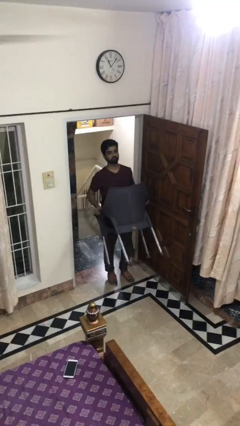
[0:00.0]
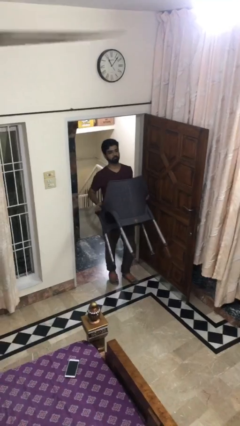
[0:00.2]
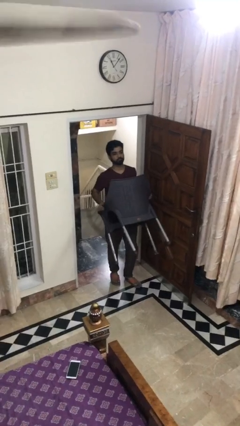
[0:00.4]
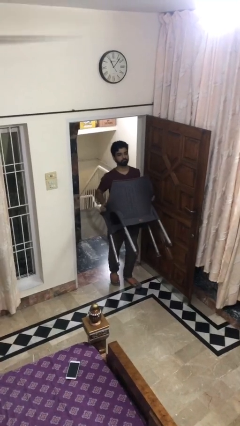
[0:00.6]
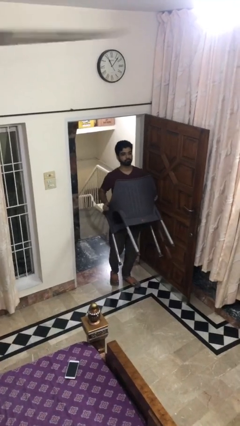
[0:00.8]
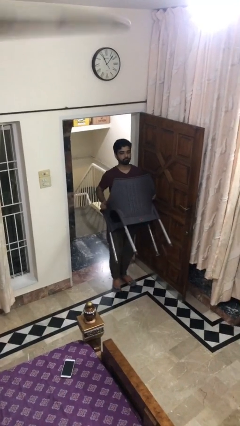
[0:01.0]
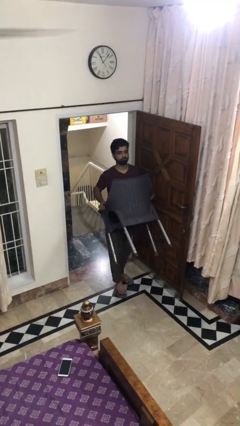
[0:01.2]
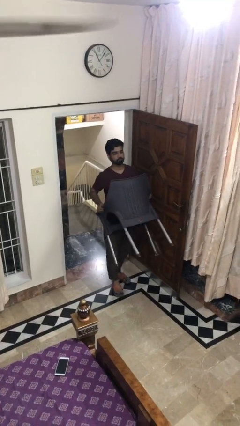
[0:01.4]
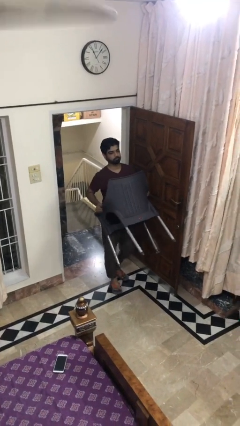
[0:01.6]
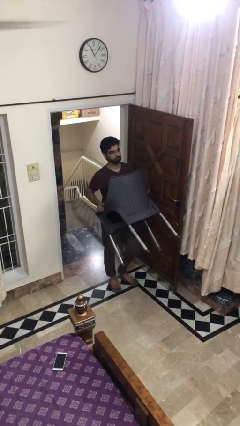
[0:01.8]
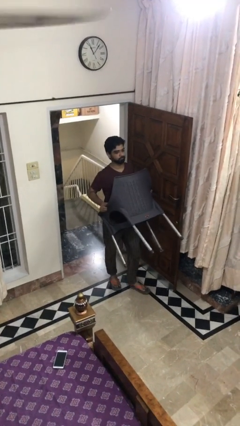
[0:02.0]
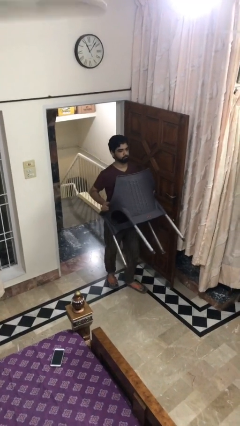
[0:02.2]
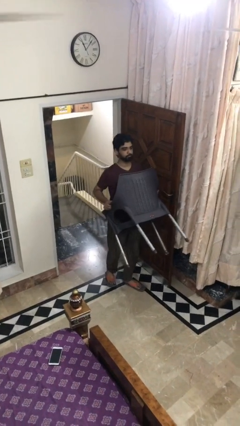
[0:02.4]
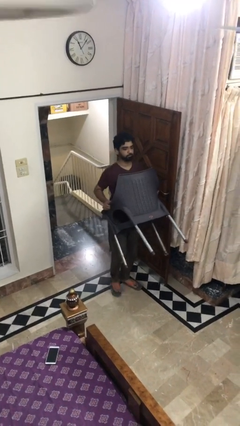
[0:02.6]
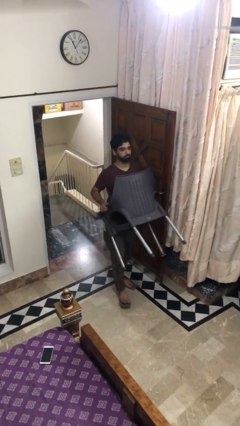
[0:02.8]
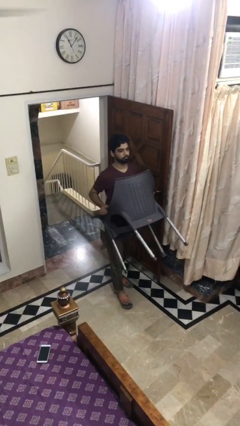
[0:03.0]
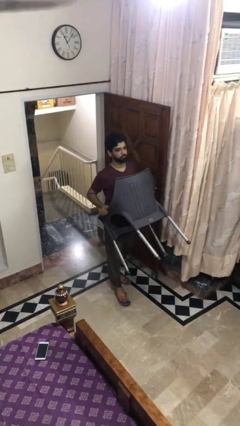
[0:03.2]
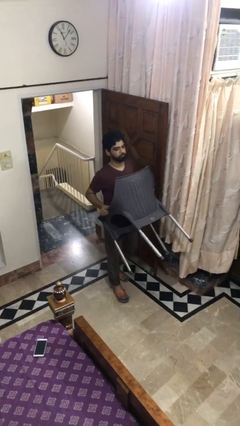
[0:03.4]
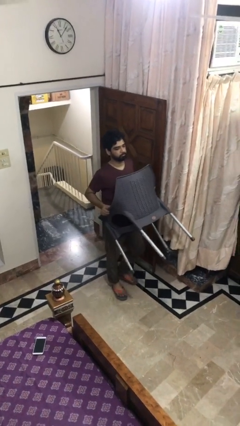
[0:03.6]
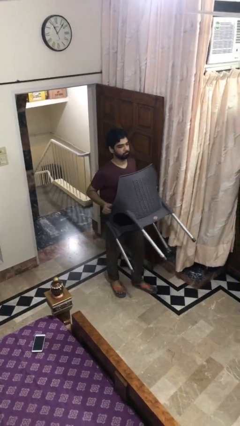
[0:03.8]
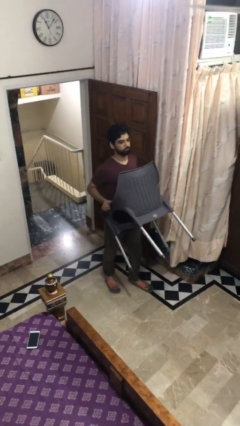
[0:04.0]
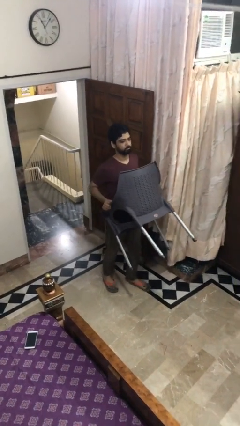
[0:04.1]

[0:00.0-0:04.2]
person carries heavy object

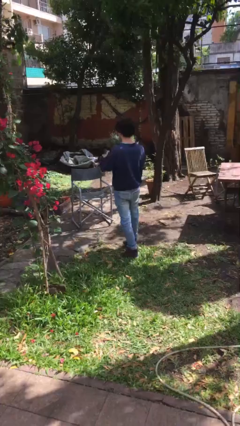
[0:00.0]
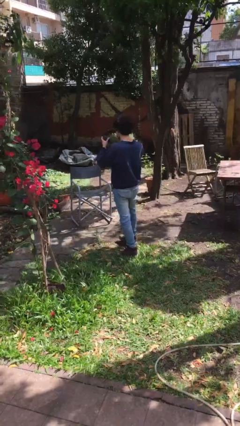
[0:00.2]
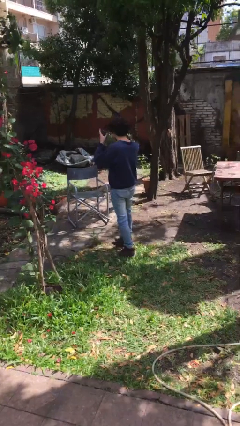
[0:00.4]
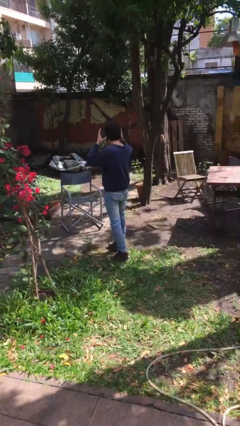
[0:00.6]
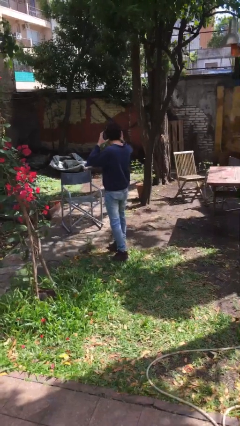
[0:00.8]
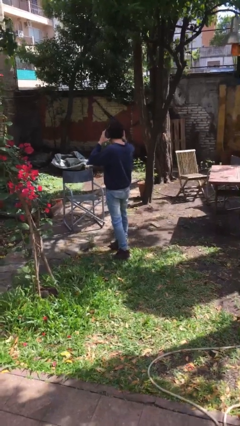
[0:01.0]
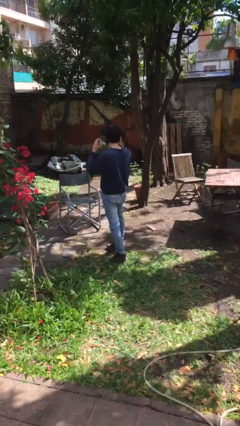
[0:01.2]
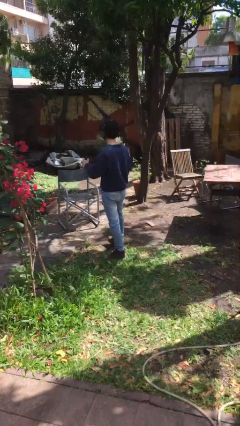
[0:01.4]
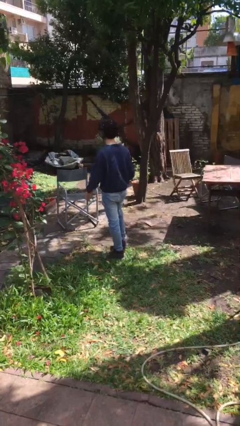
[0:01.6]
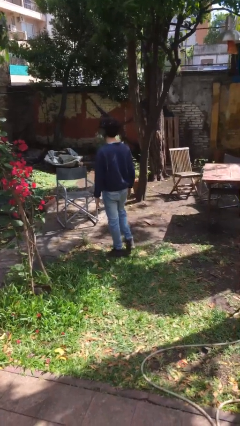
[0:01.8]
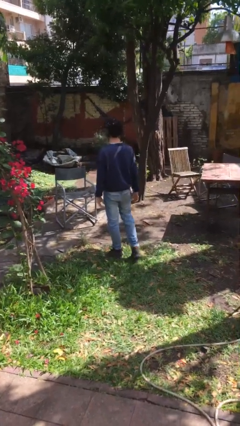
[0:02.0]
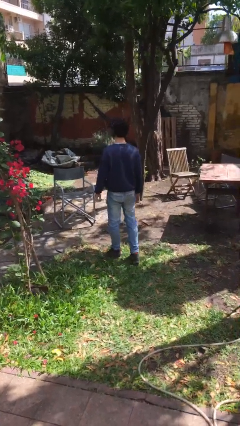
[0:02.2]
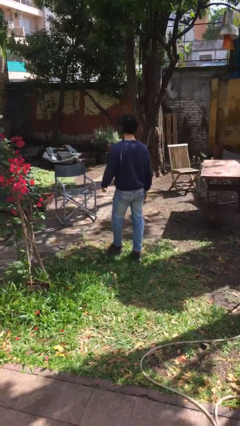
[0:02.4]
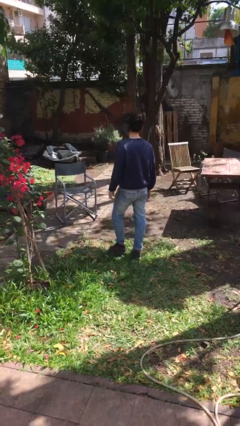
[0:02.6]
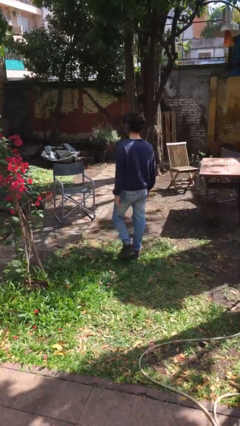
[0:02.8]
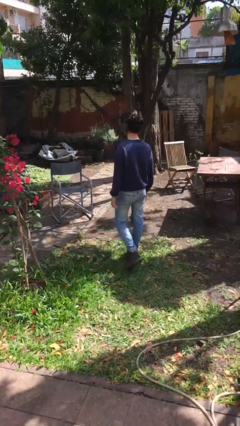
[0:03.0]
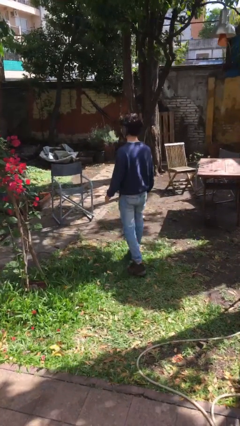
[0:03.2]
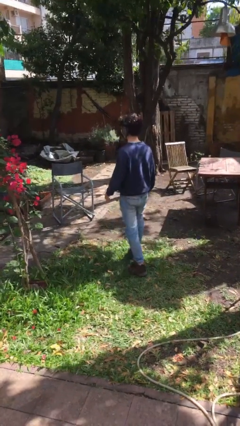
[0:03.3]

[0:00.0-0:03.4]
person puts on headphones

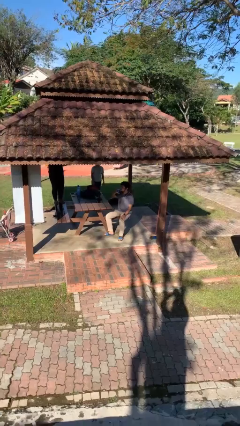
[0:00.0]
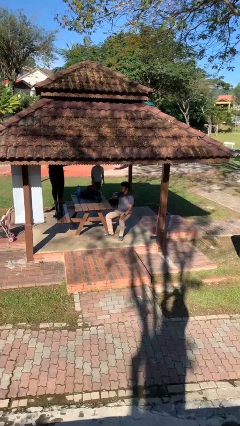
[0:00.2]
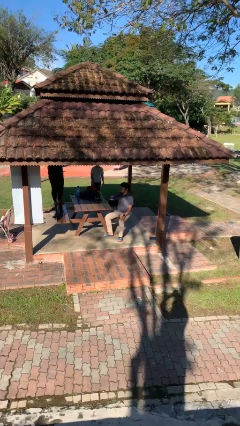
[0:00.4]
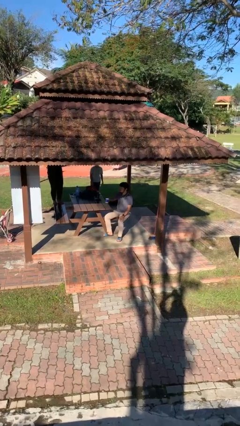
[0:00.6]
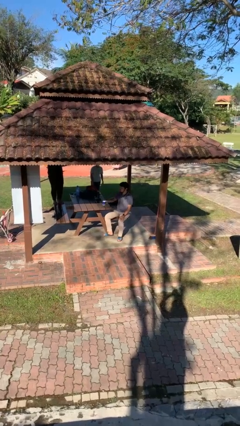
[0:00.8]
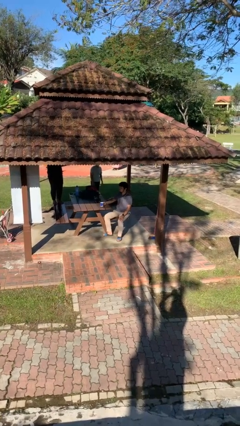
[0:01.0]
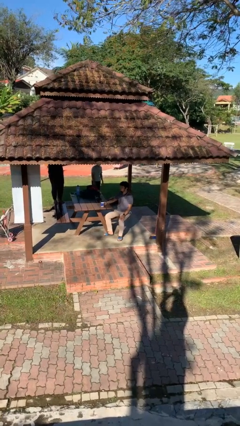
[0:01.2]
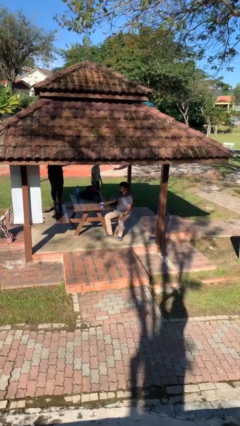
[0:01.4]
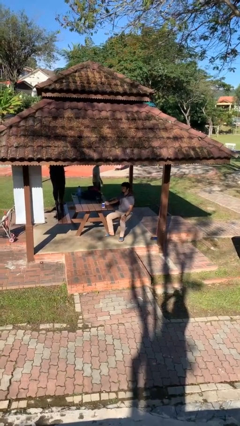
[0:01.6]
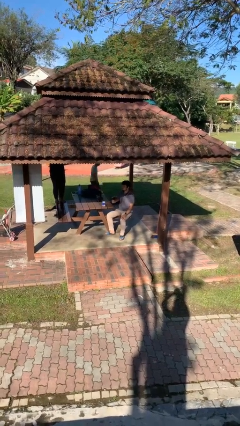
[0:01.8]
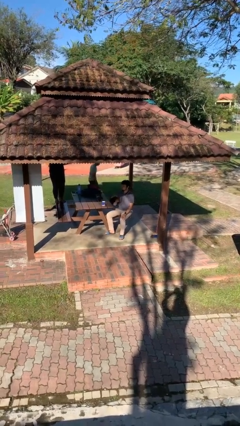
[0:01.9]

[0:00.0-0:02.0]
person puts down object on table

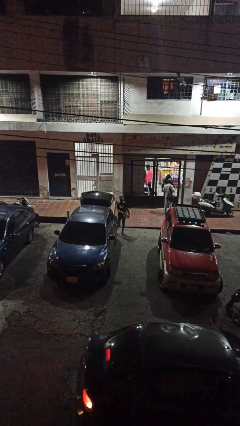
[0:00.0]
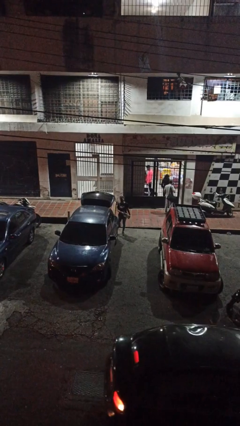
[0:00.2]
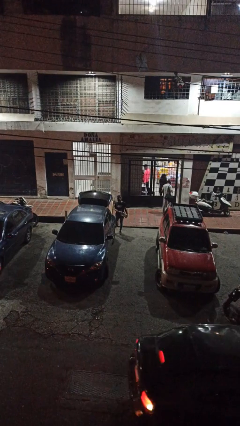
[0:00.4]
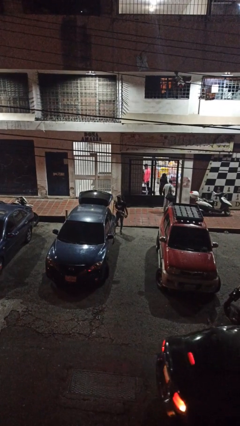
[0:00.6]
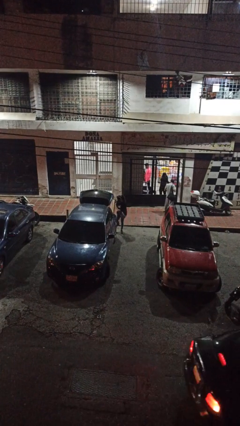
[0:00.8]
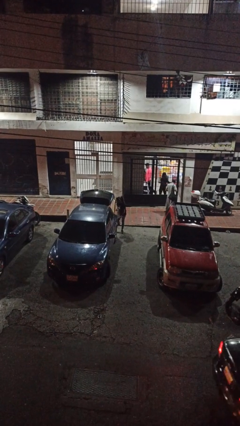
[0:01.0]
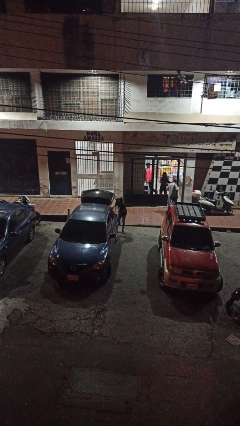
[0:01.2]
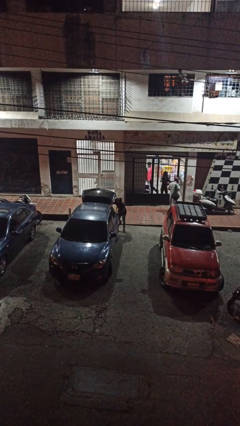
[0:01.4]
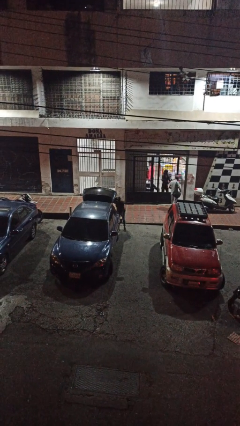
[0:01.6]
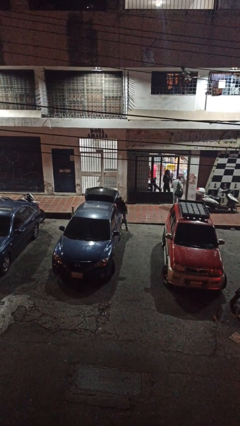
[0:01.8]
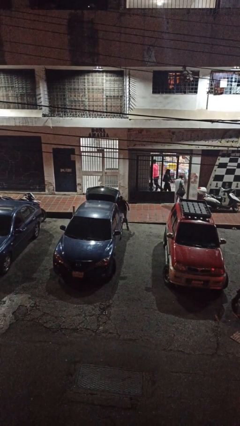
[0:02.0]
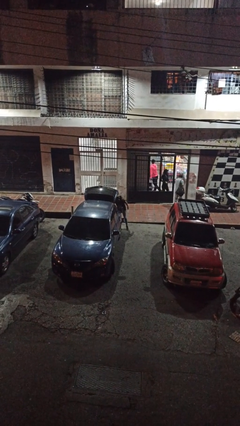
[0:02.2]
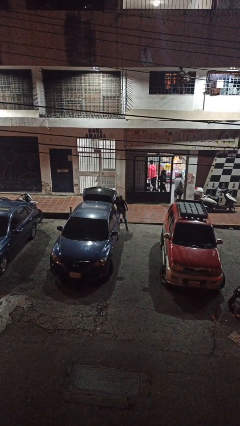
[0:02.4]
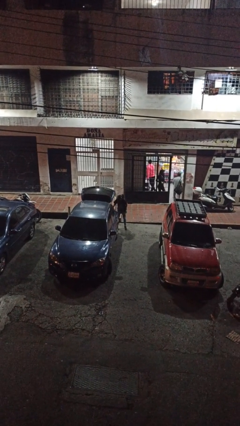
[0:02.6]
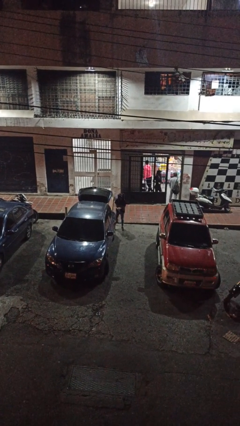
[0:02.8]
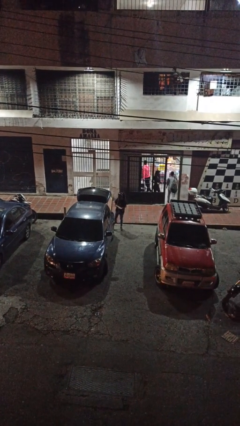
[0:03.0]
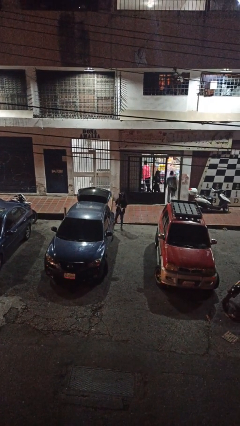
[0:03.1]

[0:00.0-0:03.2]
person loads car

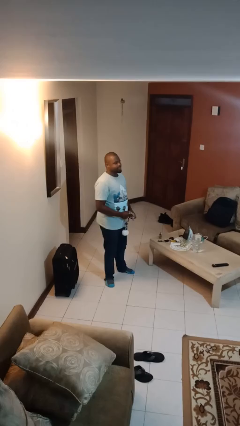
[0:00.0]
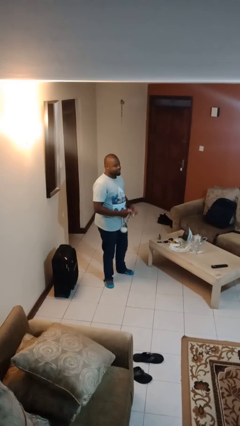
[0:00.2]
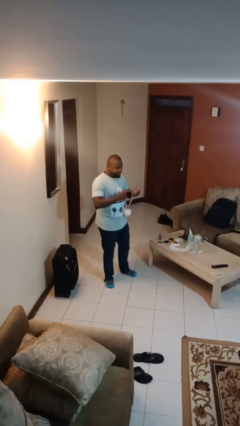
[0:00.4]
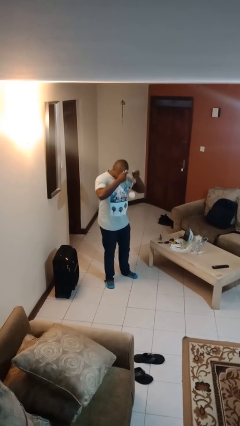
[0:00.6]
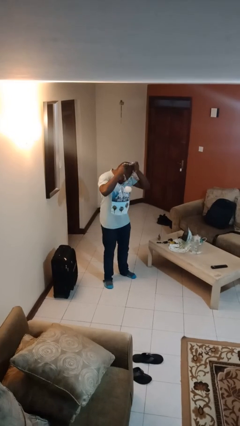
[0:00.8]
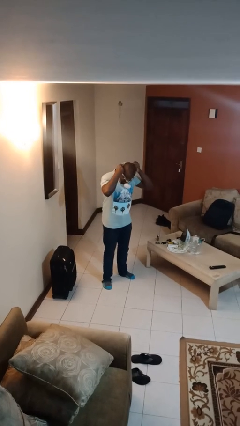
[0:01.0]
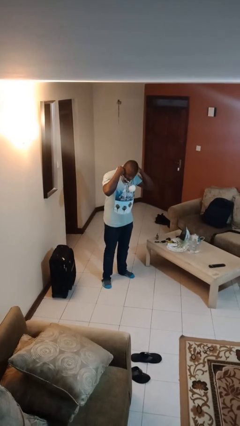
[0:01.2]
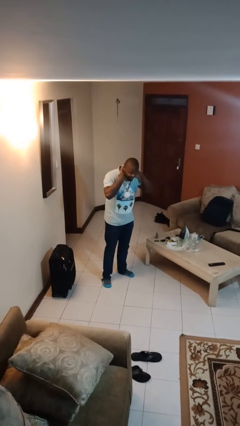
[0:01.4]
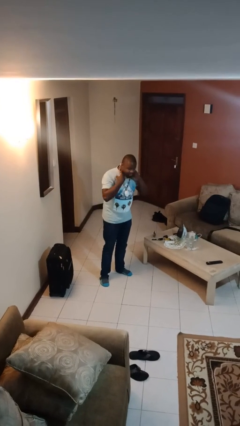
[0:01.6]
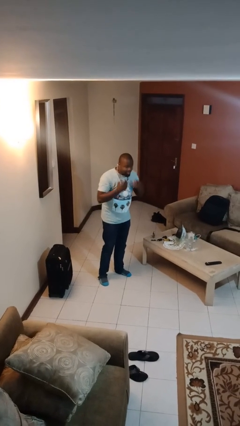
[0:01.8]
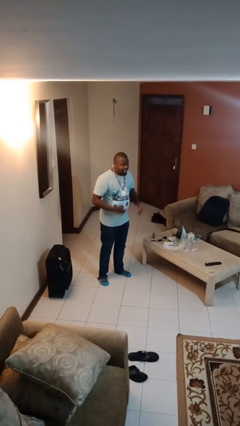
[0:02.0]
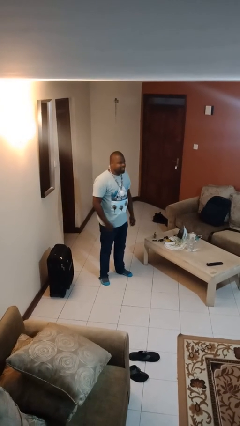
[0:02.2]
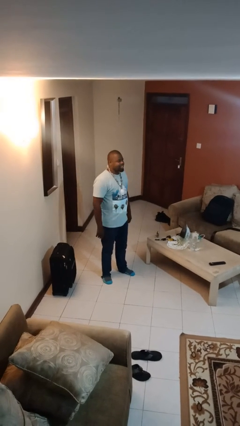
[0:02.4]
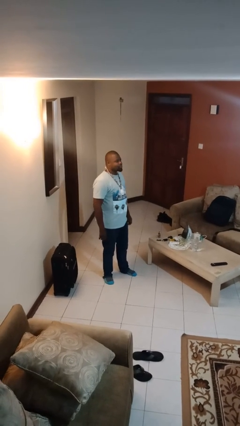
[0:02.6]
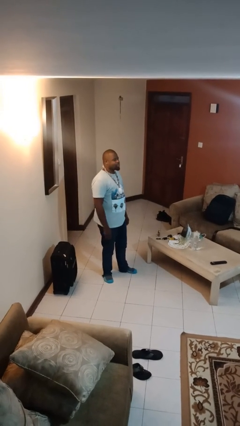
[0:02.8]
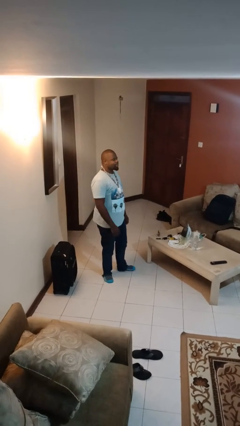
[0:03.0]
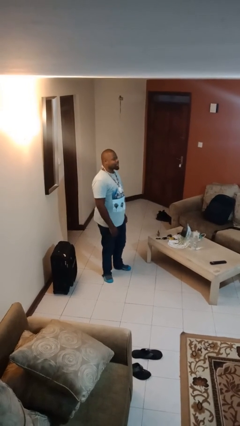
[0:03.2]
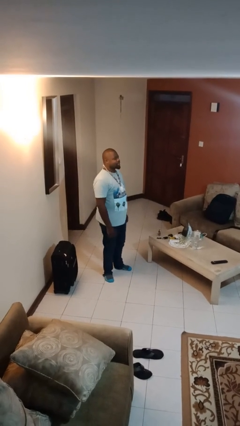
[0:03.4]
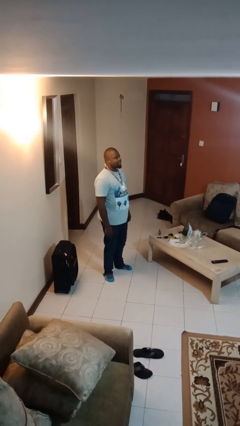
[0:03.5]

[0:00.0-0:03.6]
person puts on necklace

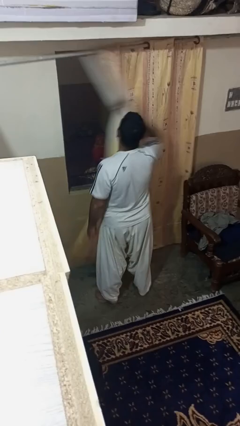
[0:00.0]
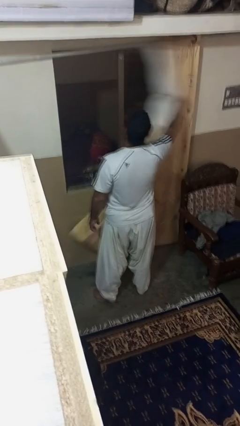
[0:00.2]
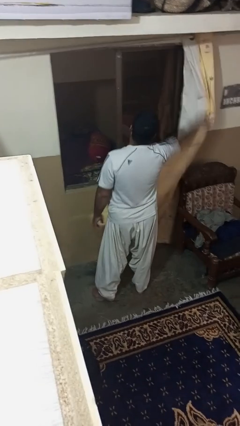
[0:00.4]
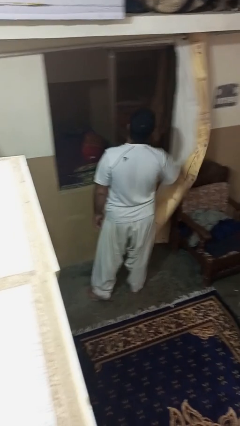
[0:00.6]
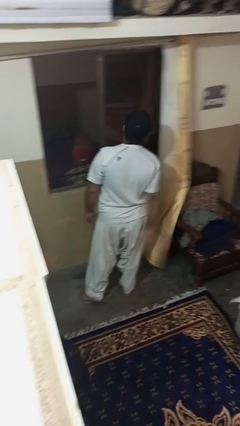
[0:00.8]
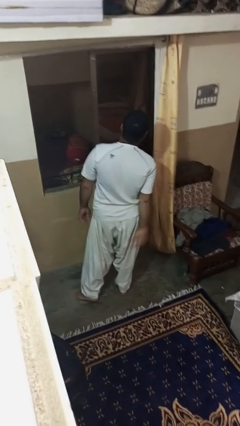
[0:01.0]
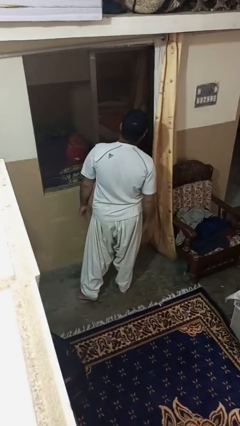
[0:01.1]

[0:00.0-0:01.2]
person opens curtains
